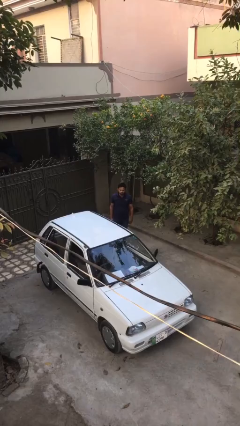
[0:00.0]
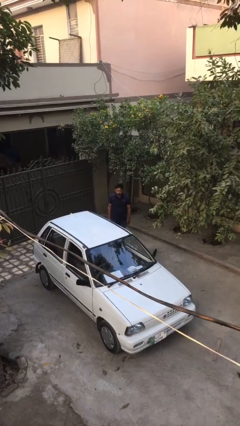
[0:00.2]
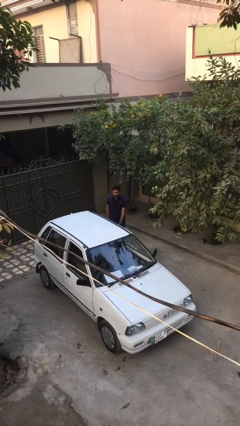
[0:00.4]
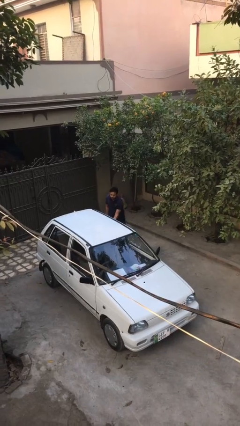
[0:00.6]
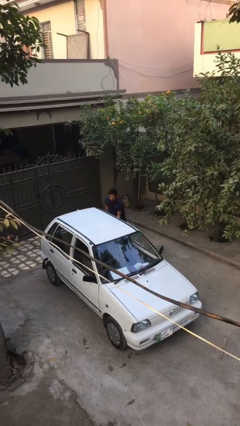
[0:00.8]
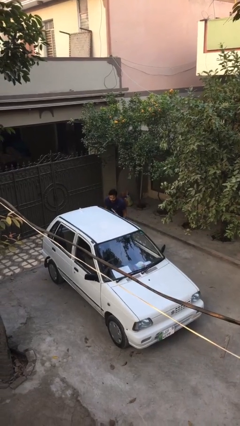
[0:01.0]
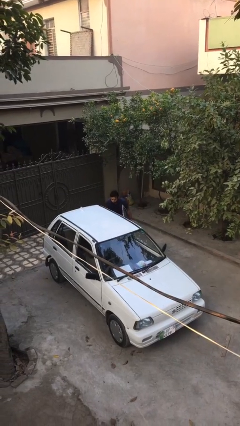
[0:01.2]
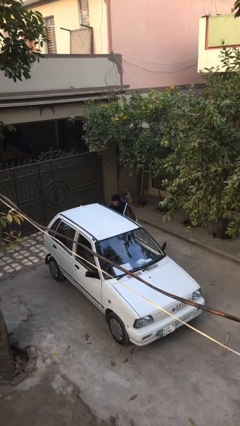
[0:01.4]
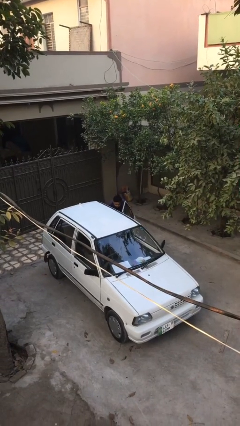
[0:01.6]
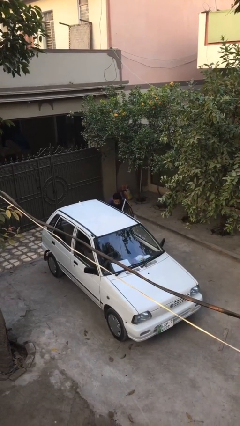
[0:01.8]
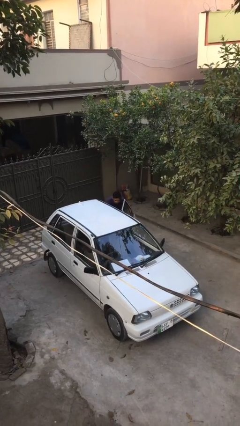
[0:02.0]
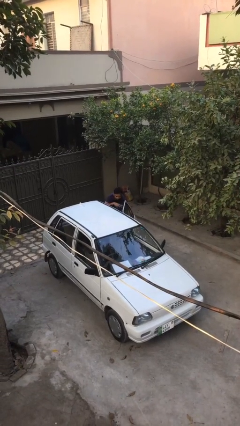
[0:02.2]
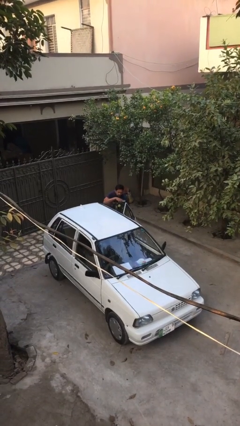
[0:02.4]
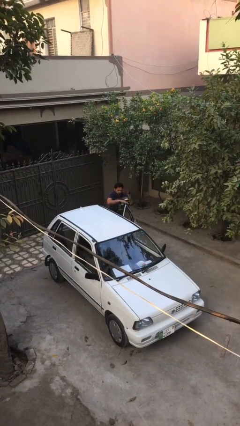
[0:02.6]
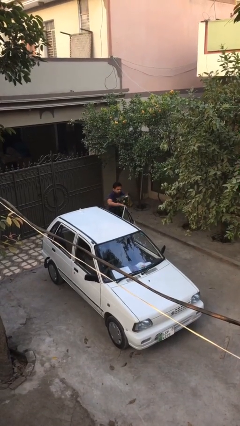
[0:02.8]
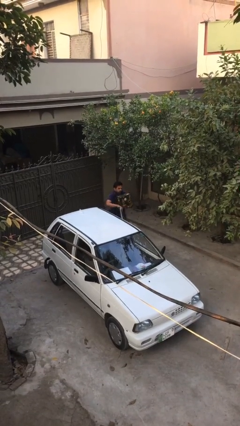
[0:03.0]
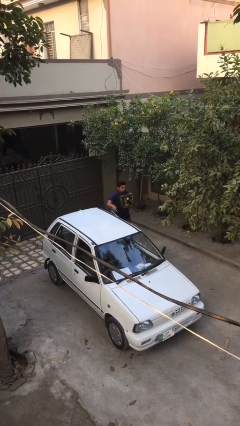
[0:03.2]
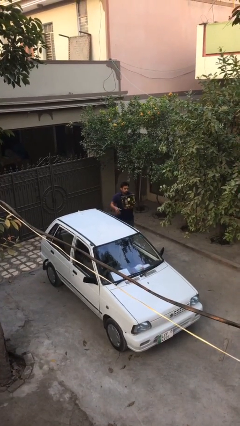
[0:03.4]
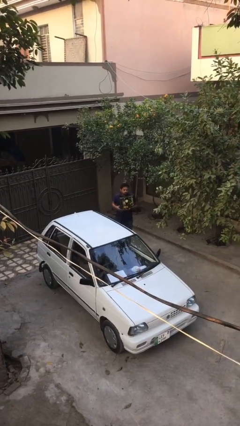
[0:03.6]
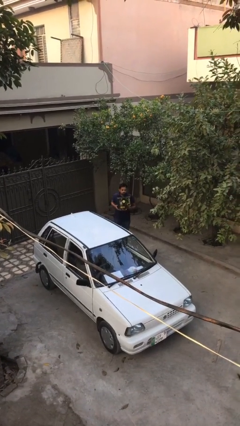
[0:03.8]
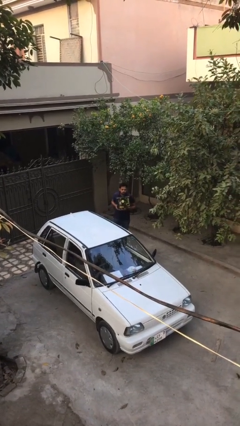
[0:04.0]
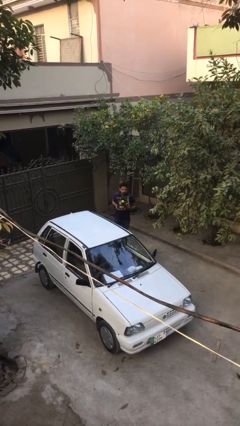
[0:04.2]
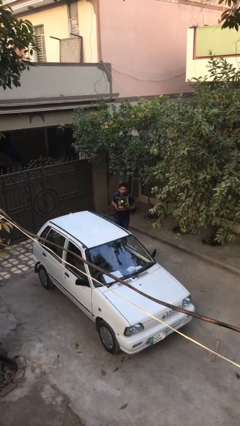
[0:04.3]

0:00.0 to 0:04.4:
person unloads car

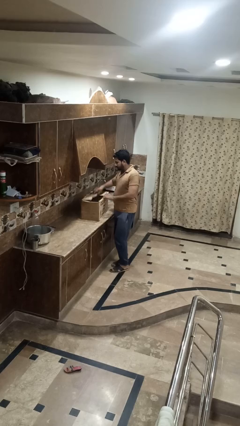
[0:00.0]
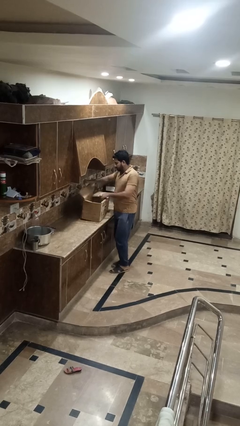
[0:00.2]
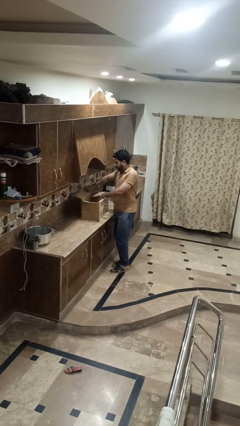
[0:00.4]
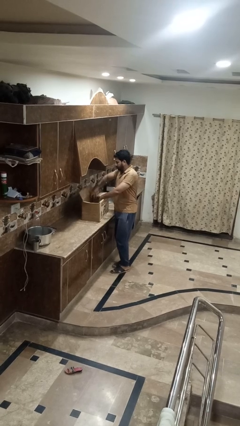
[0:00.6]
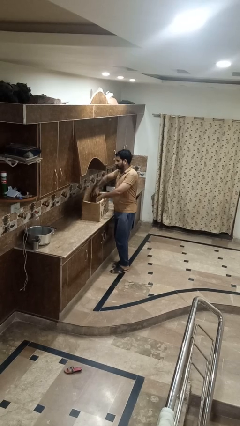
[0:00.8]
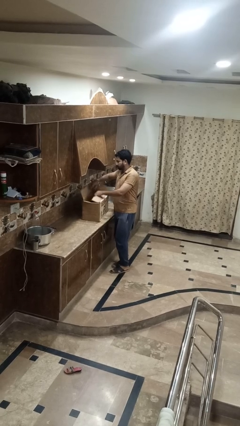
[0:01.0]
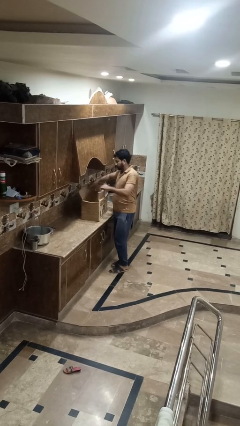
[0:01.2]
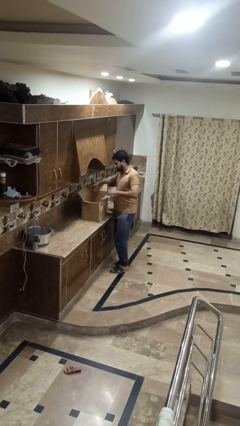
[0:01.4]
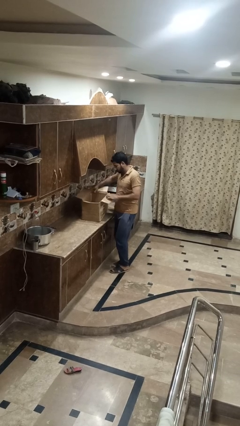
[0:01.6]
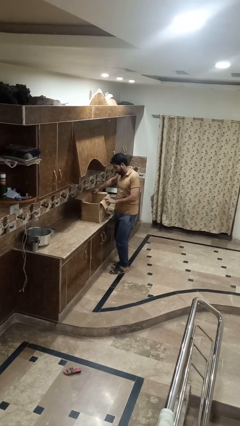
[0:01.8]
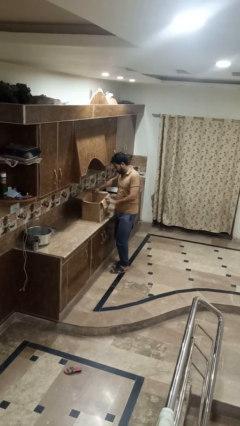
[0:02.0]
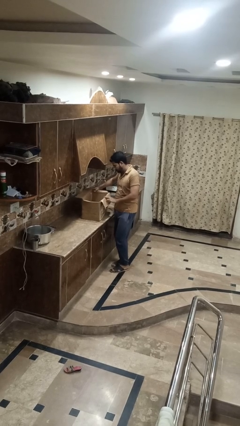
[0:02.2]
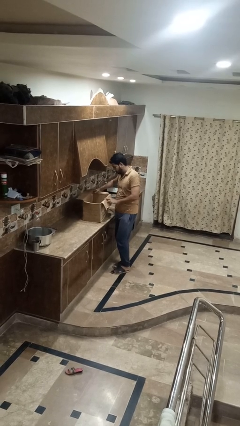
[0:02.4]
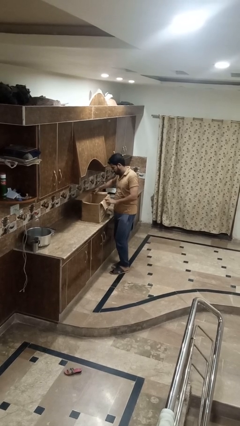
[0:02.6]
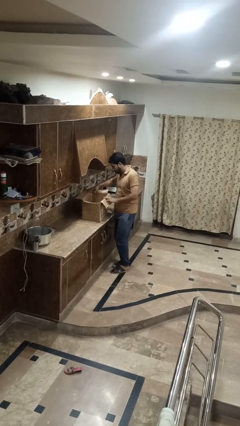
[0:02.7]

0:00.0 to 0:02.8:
person opens box

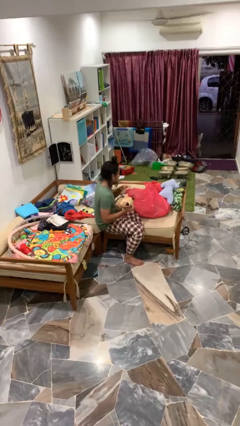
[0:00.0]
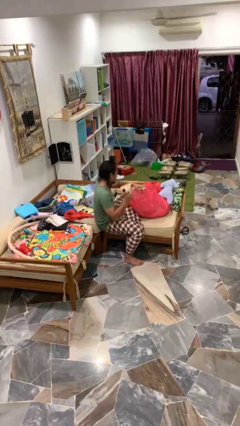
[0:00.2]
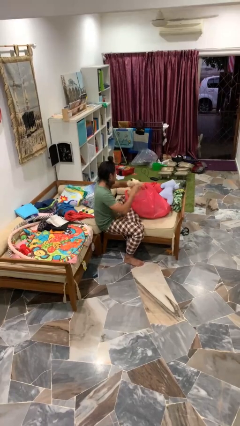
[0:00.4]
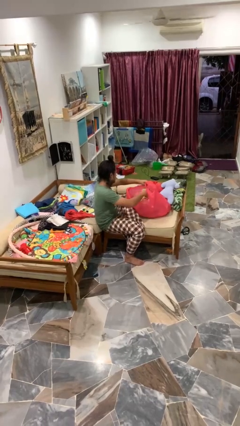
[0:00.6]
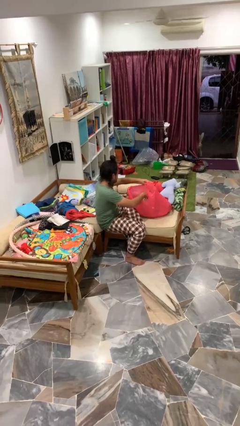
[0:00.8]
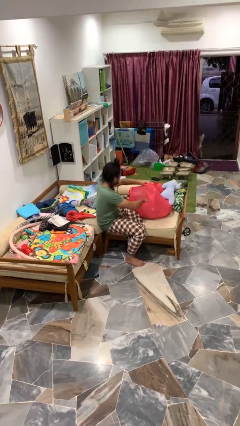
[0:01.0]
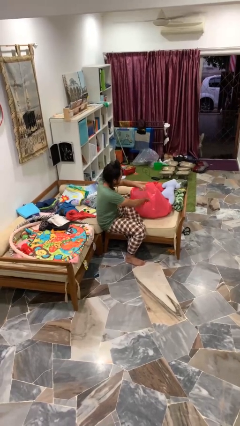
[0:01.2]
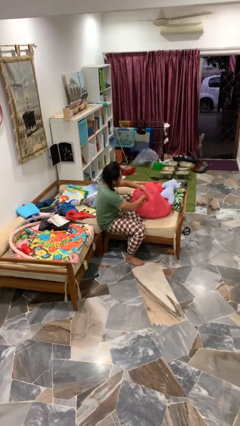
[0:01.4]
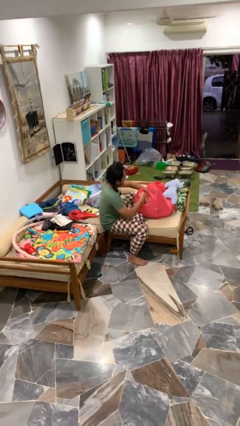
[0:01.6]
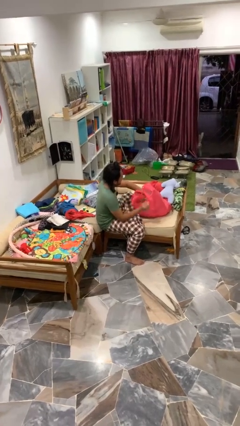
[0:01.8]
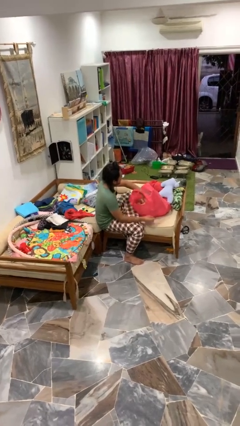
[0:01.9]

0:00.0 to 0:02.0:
person puts object into bag

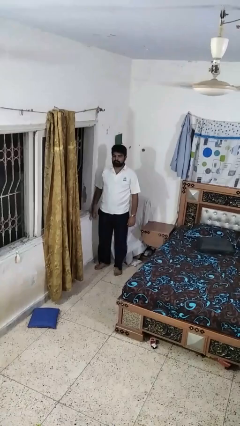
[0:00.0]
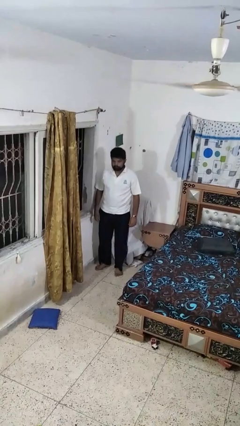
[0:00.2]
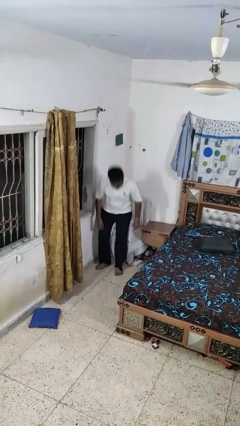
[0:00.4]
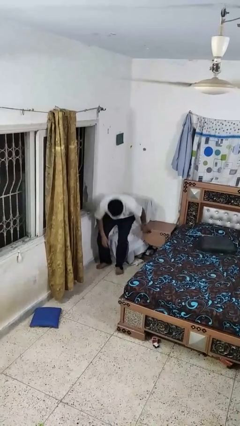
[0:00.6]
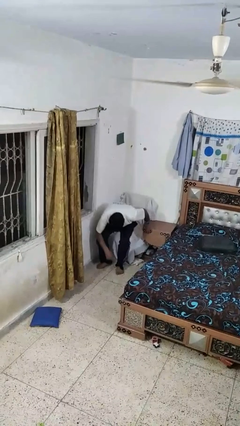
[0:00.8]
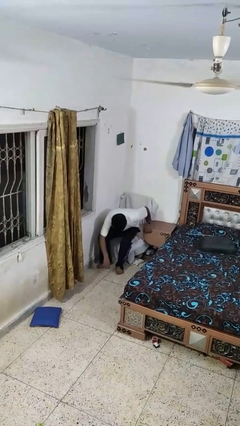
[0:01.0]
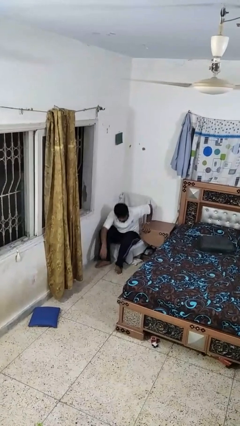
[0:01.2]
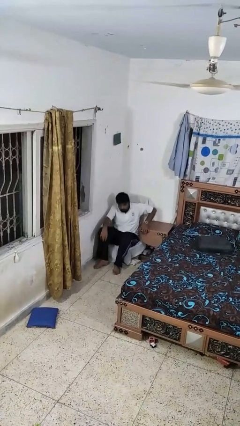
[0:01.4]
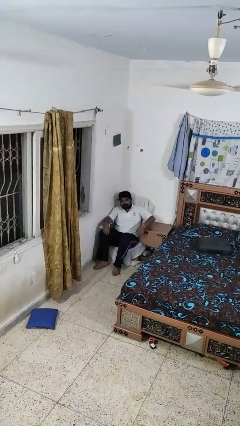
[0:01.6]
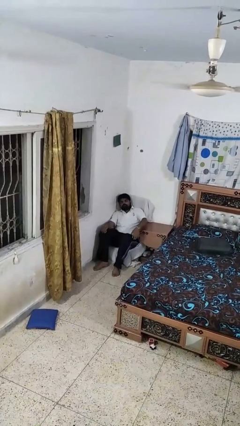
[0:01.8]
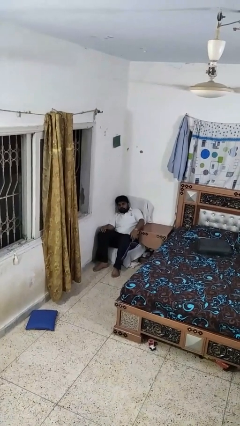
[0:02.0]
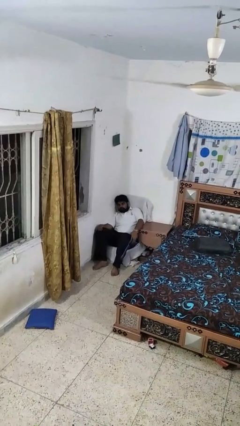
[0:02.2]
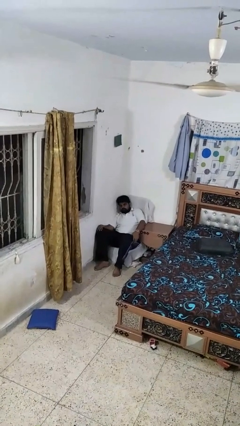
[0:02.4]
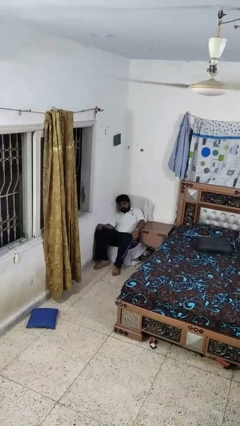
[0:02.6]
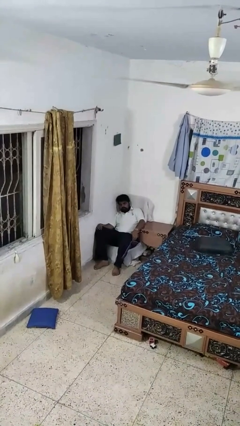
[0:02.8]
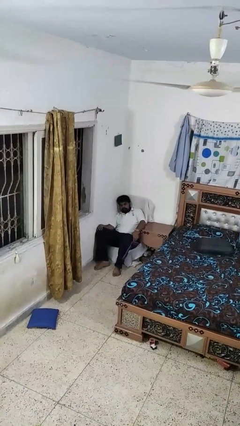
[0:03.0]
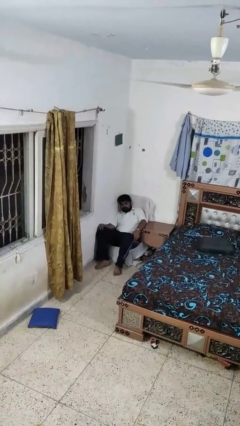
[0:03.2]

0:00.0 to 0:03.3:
person lies down on couch

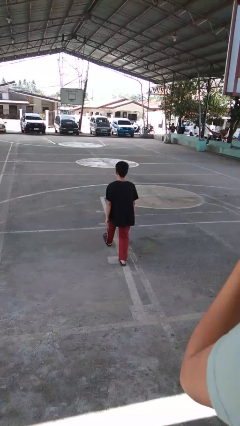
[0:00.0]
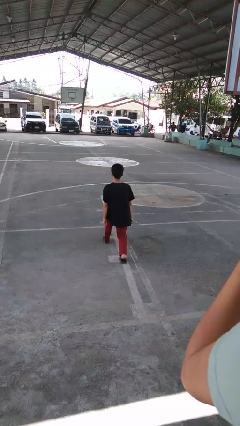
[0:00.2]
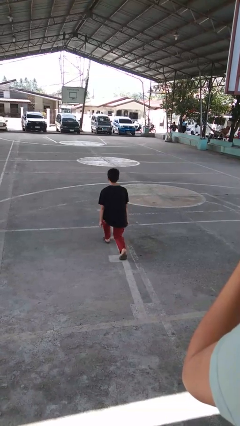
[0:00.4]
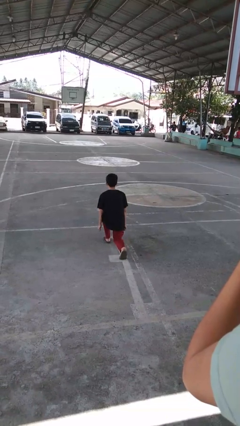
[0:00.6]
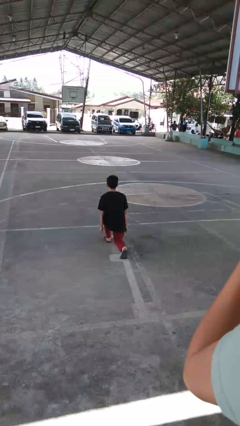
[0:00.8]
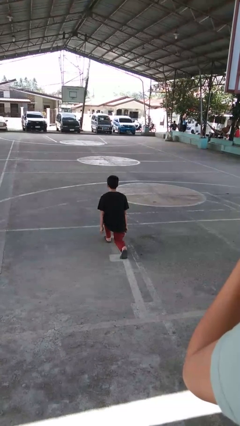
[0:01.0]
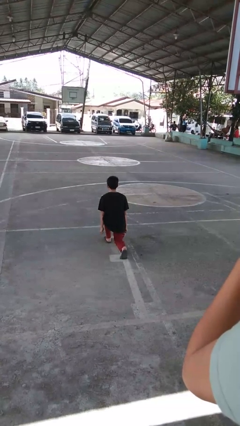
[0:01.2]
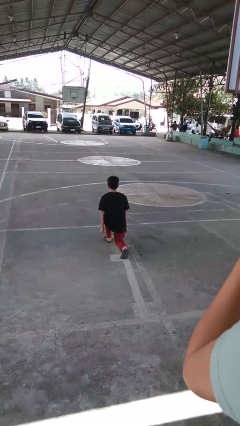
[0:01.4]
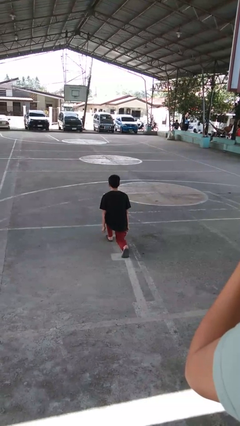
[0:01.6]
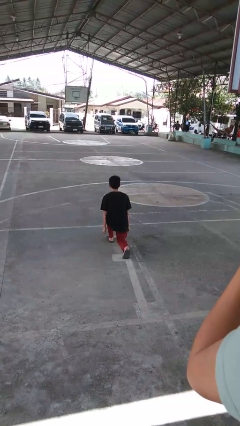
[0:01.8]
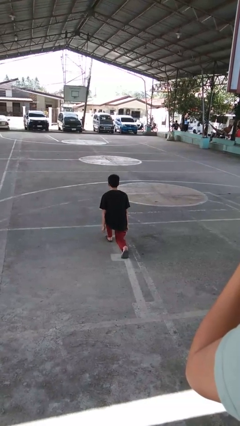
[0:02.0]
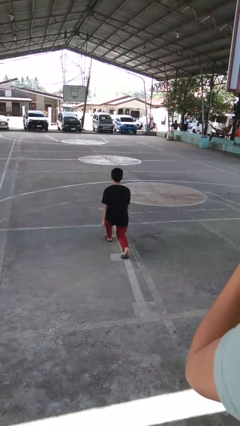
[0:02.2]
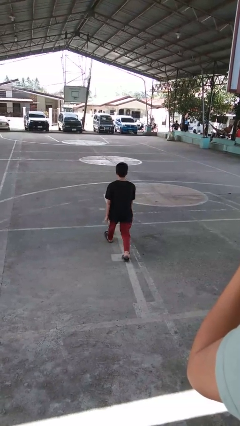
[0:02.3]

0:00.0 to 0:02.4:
person exercises with lunges

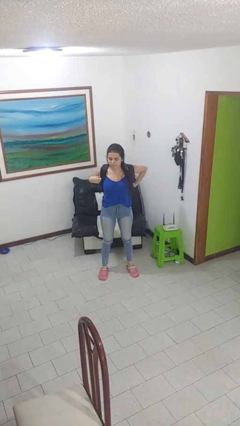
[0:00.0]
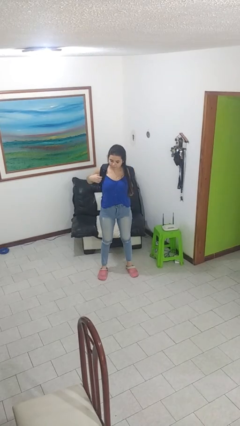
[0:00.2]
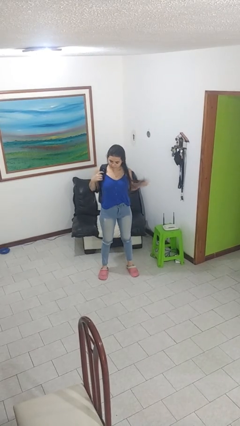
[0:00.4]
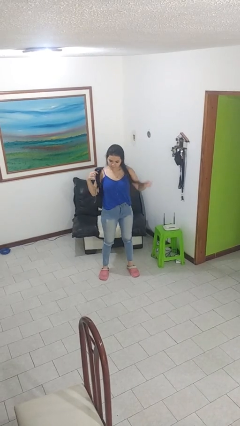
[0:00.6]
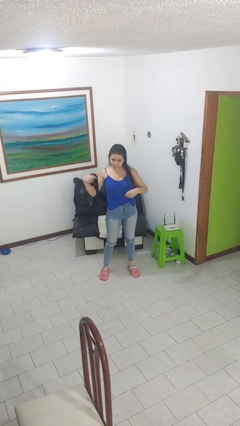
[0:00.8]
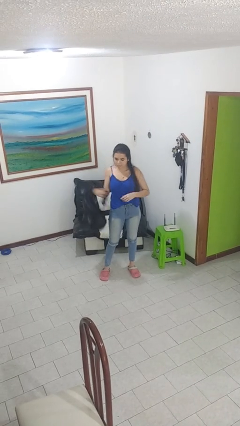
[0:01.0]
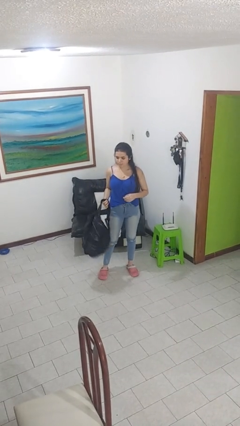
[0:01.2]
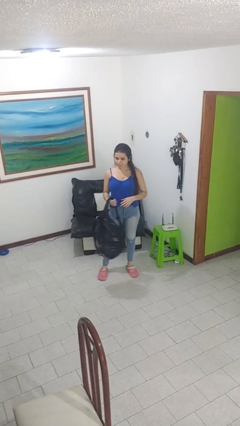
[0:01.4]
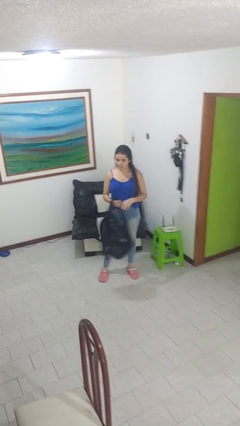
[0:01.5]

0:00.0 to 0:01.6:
person takes off backpack

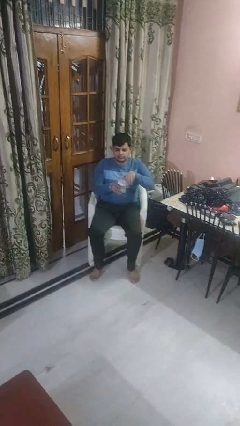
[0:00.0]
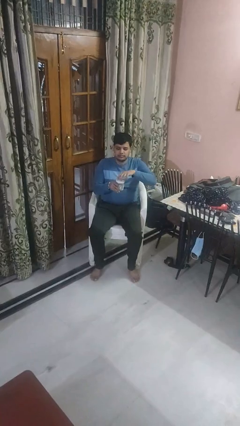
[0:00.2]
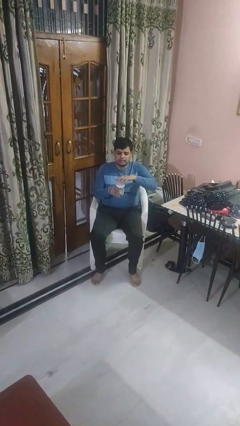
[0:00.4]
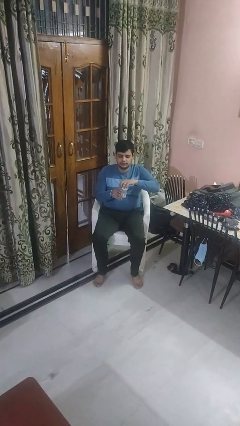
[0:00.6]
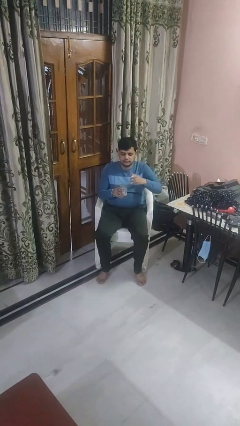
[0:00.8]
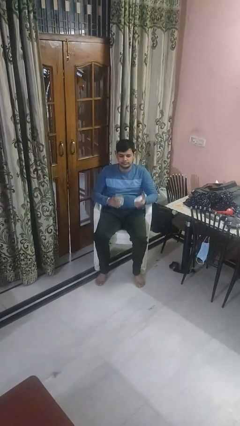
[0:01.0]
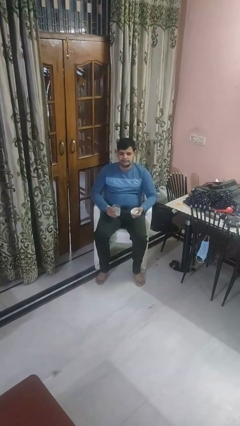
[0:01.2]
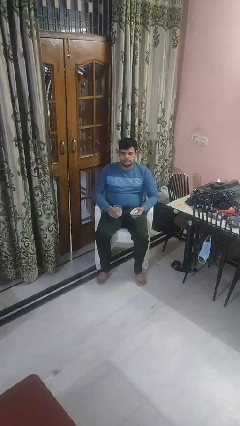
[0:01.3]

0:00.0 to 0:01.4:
person opens jar
